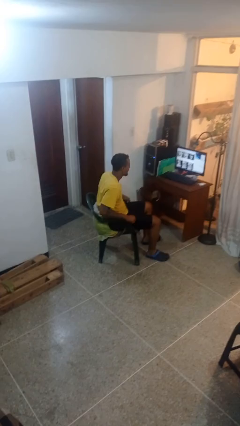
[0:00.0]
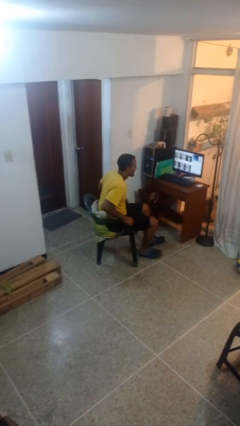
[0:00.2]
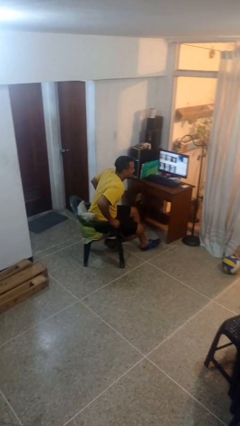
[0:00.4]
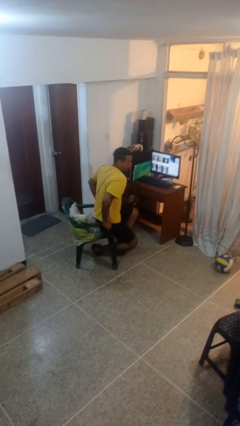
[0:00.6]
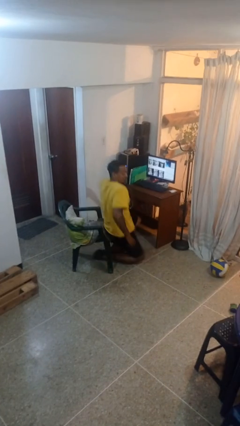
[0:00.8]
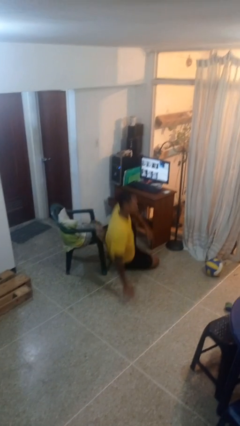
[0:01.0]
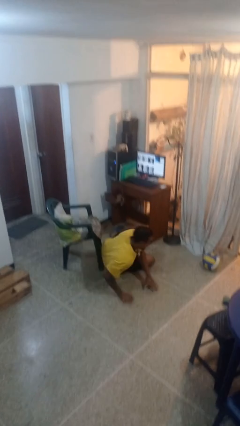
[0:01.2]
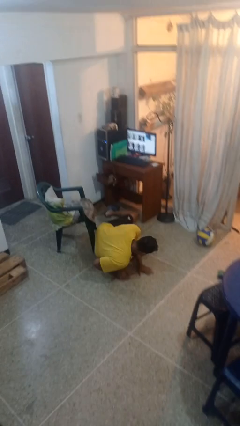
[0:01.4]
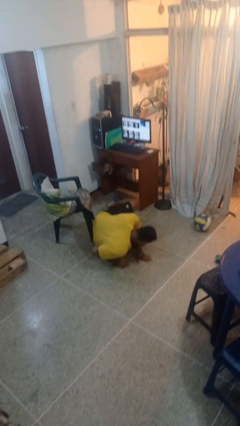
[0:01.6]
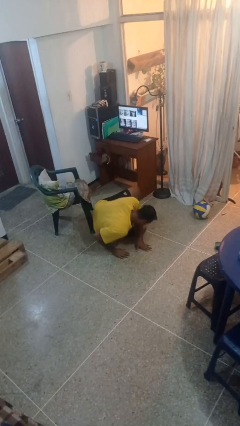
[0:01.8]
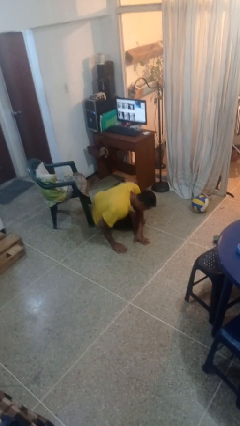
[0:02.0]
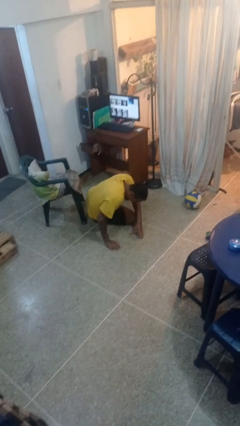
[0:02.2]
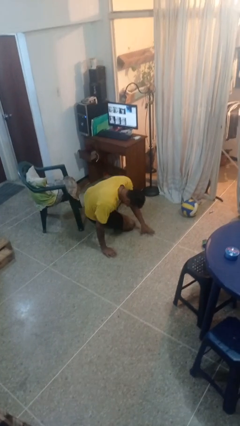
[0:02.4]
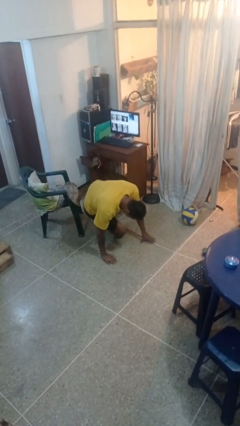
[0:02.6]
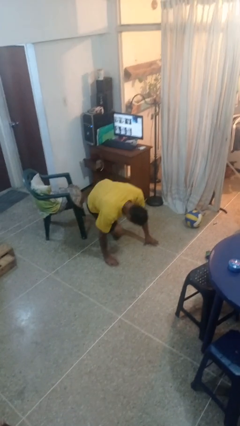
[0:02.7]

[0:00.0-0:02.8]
person falls from chair

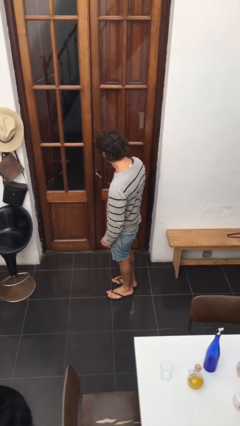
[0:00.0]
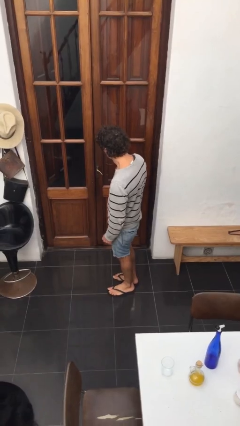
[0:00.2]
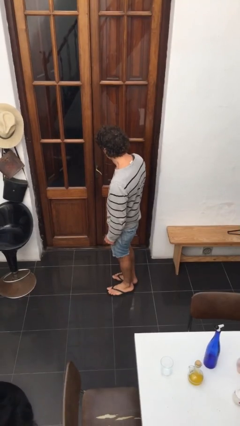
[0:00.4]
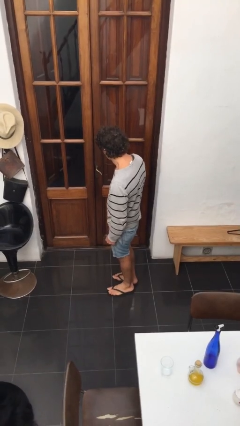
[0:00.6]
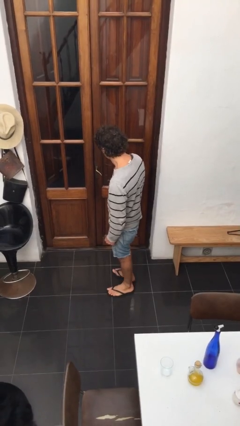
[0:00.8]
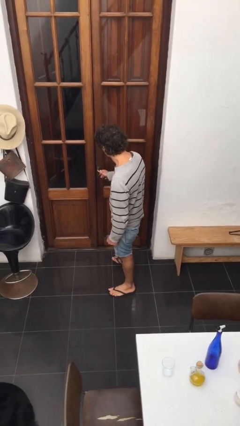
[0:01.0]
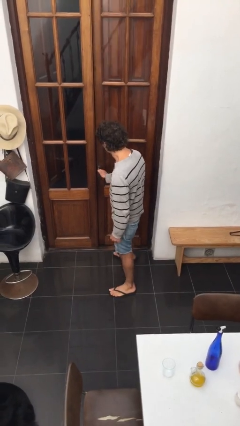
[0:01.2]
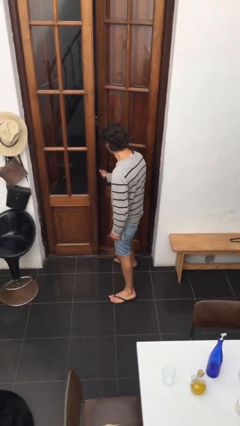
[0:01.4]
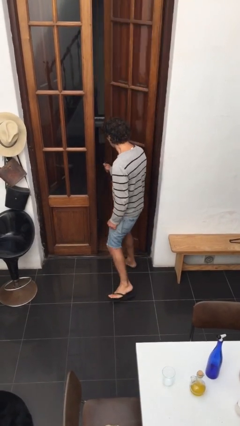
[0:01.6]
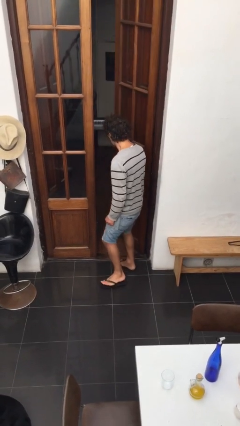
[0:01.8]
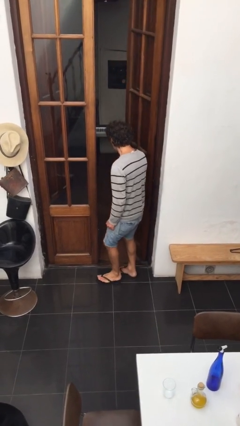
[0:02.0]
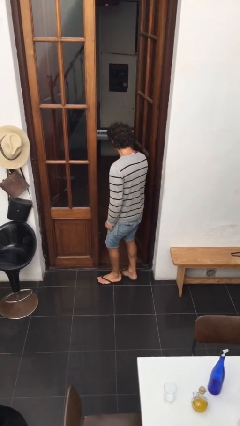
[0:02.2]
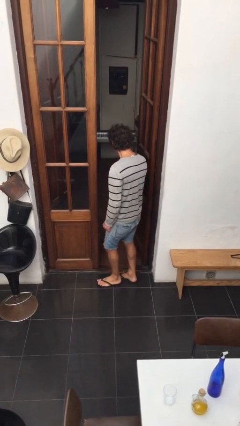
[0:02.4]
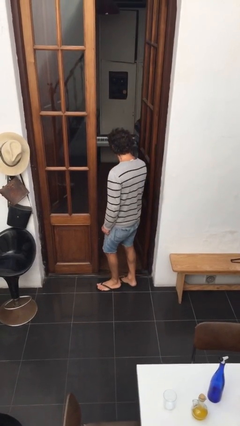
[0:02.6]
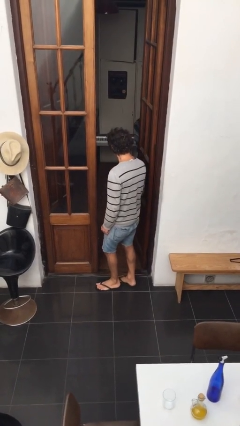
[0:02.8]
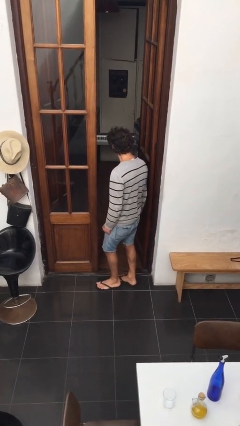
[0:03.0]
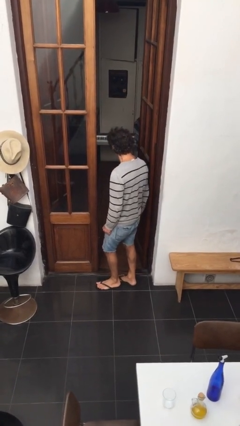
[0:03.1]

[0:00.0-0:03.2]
person opens facility door

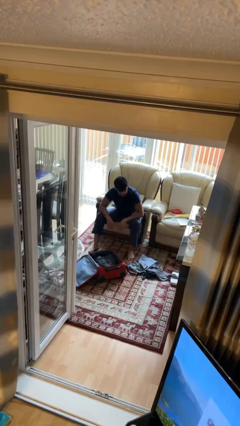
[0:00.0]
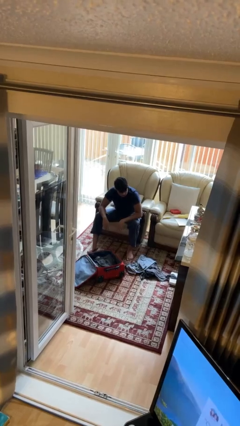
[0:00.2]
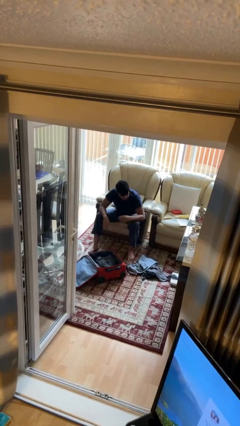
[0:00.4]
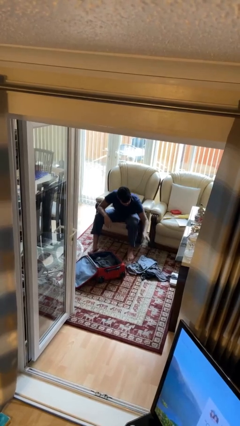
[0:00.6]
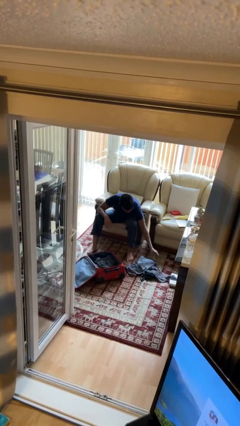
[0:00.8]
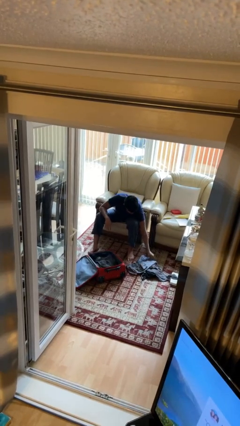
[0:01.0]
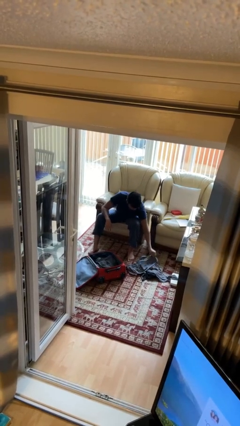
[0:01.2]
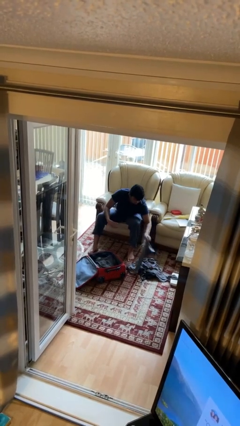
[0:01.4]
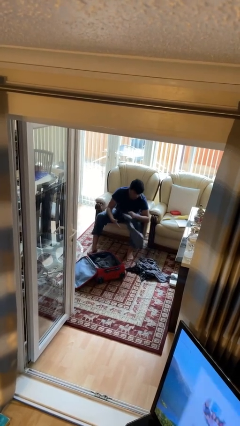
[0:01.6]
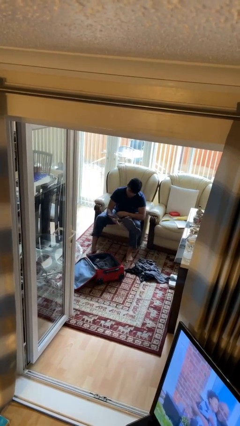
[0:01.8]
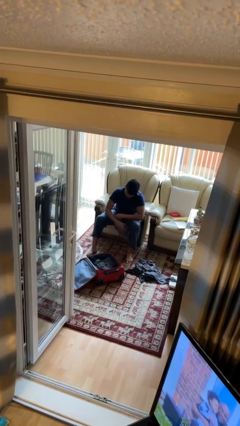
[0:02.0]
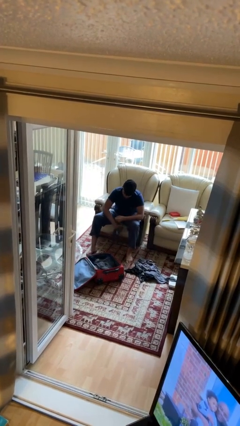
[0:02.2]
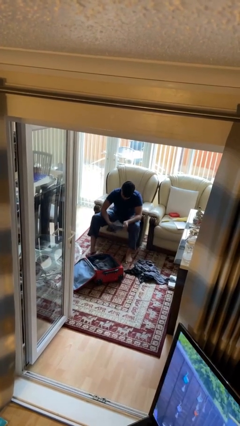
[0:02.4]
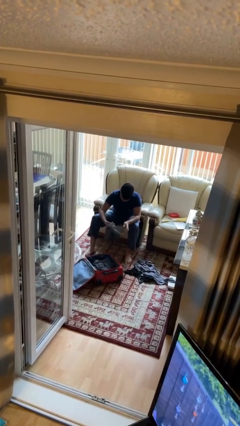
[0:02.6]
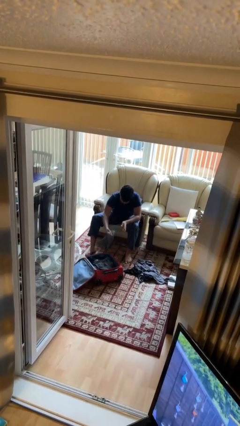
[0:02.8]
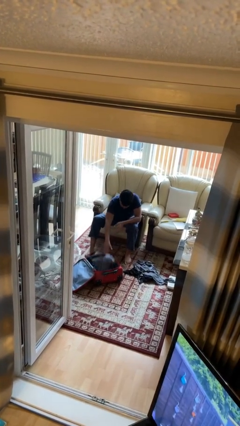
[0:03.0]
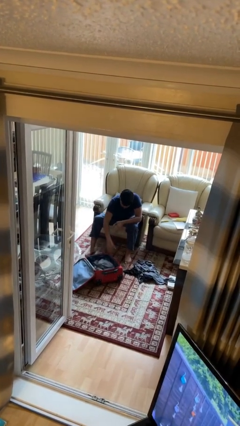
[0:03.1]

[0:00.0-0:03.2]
person loads clothes into suitcase

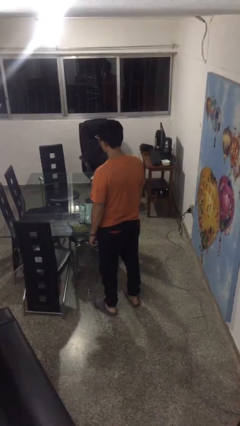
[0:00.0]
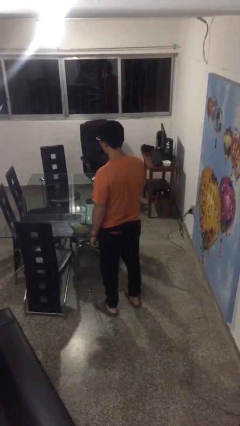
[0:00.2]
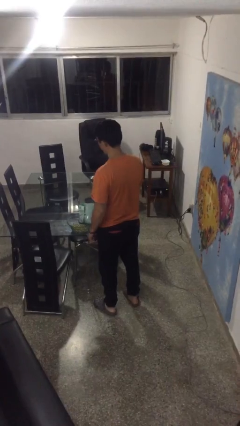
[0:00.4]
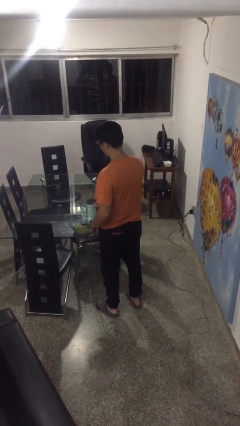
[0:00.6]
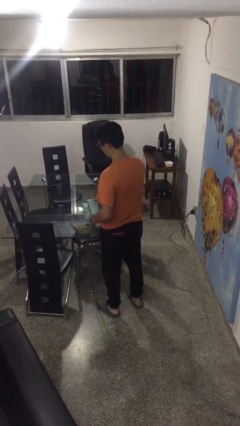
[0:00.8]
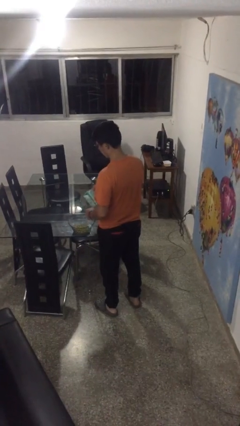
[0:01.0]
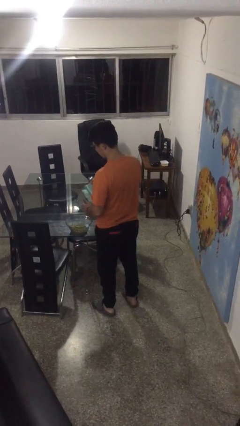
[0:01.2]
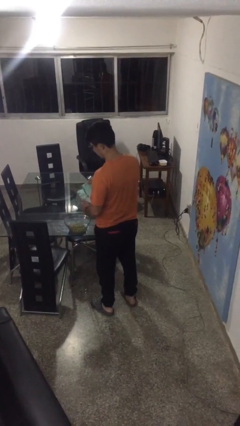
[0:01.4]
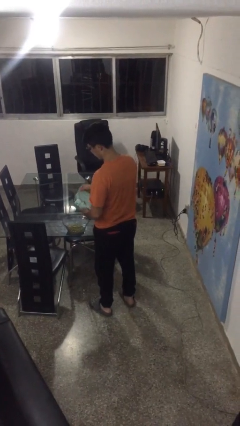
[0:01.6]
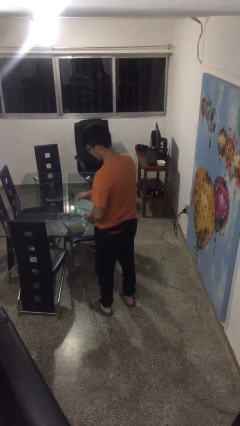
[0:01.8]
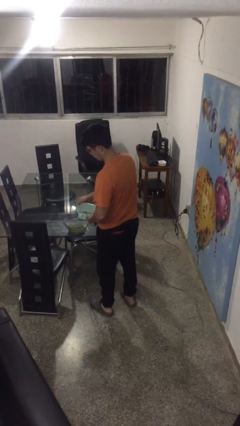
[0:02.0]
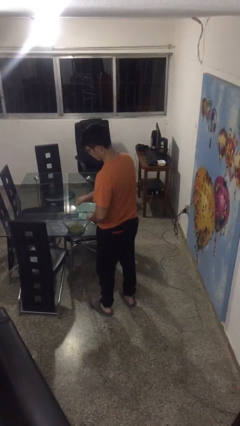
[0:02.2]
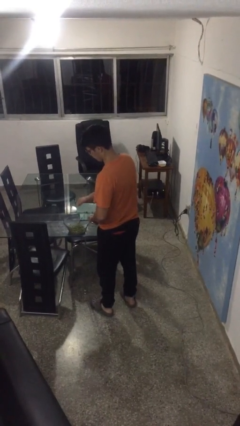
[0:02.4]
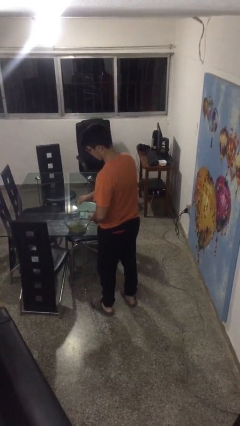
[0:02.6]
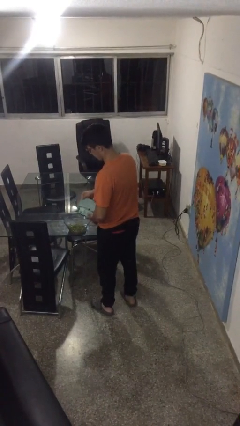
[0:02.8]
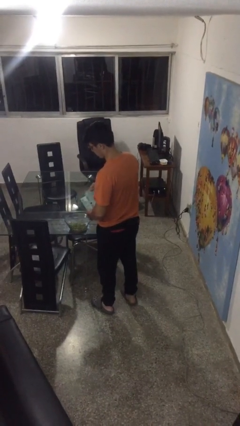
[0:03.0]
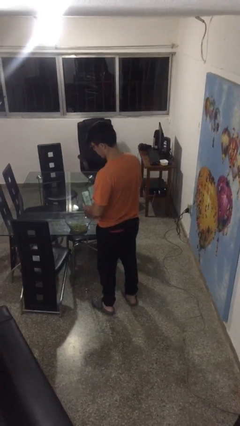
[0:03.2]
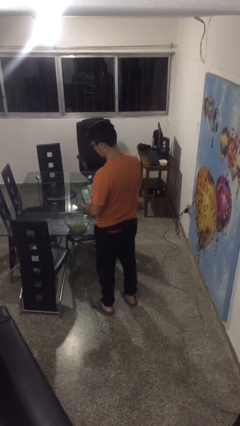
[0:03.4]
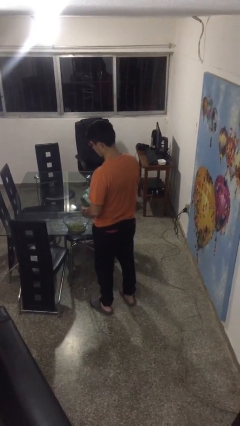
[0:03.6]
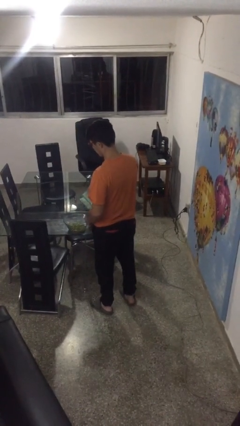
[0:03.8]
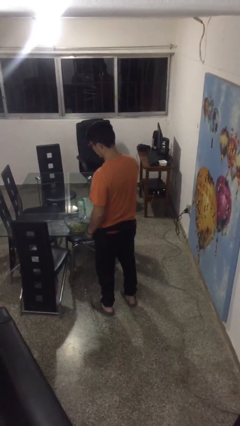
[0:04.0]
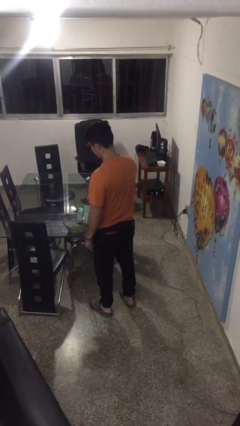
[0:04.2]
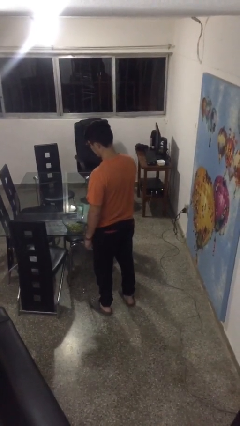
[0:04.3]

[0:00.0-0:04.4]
person pours into bowl

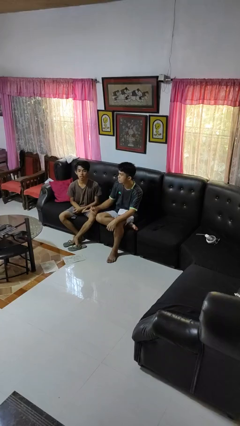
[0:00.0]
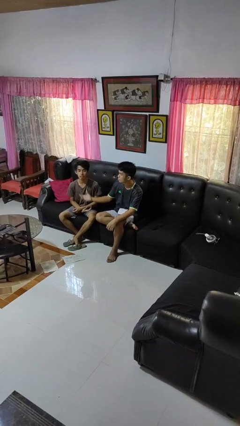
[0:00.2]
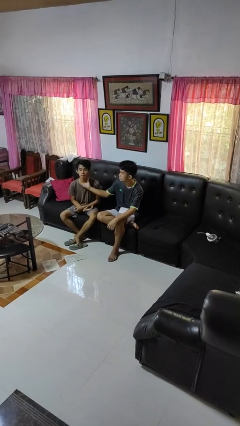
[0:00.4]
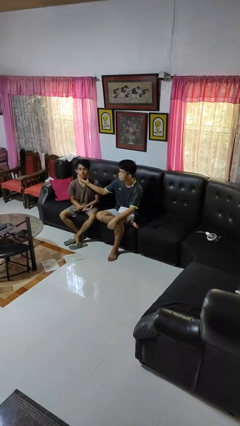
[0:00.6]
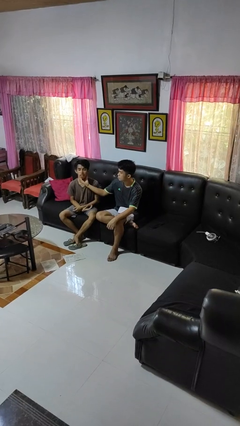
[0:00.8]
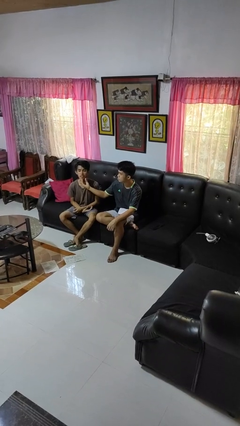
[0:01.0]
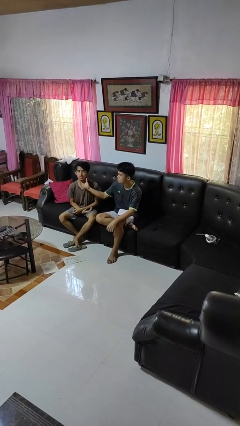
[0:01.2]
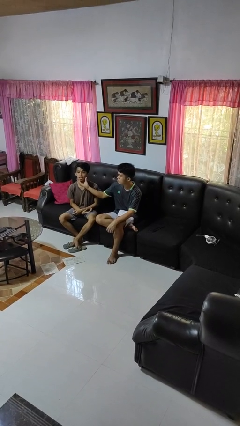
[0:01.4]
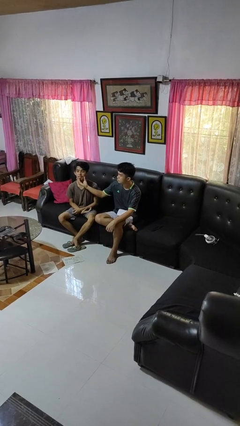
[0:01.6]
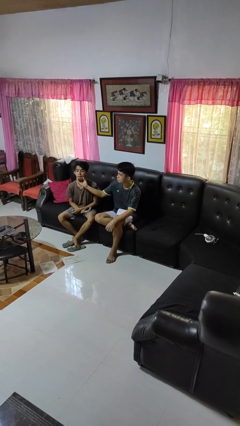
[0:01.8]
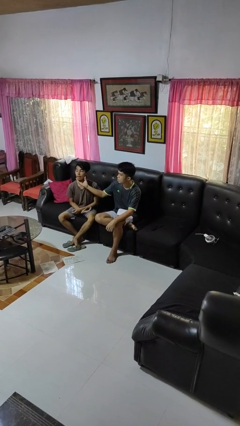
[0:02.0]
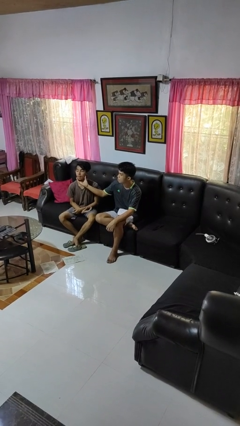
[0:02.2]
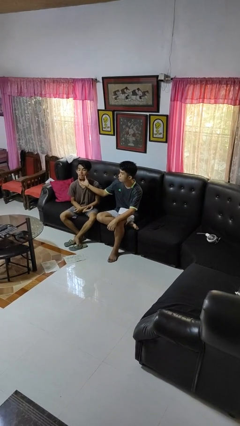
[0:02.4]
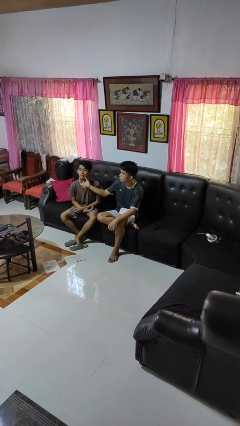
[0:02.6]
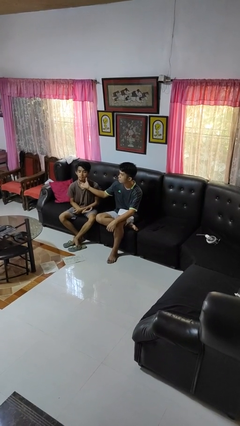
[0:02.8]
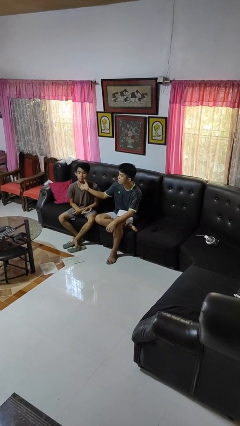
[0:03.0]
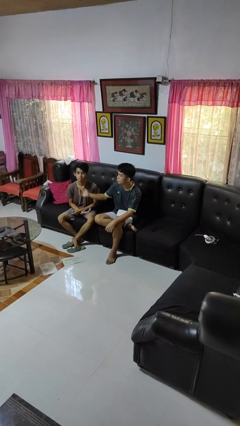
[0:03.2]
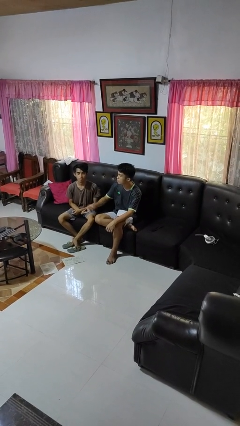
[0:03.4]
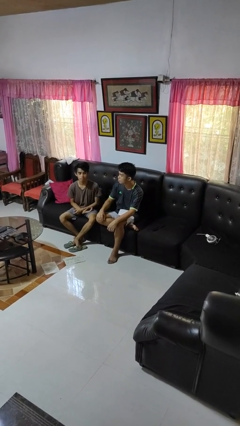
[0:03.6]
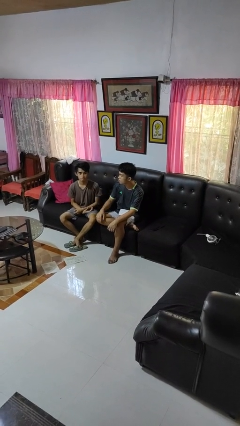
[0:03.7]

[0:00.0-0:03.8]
person touches face of person
